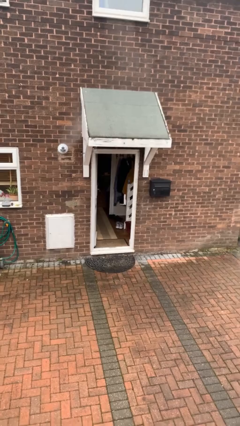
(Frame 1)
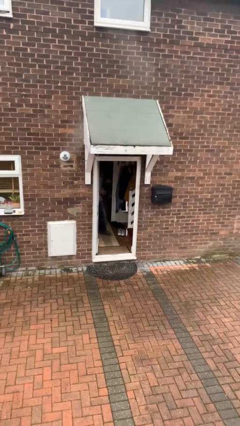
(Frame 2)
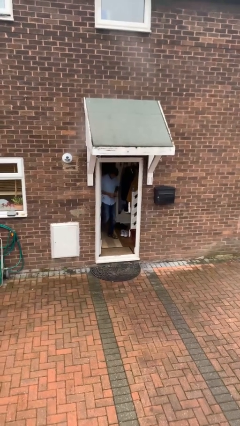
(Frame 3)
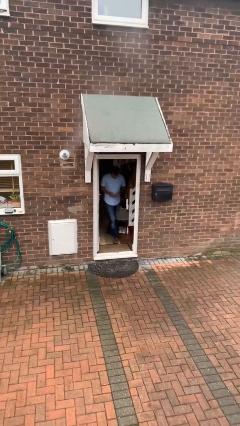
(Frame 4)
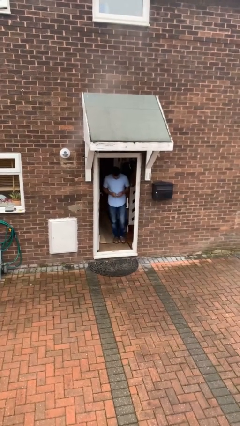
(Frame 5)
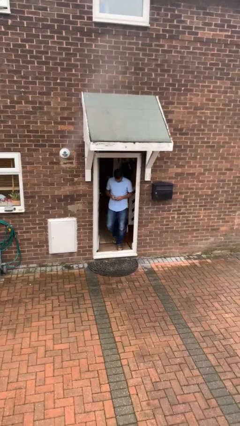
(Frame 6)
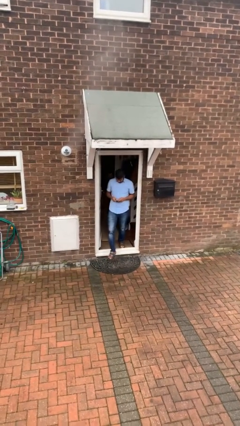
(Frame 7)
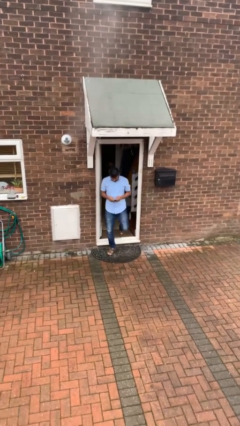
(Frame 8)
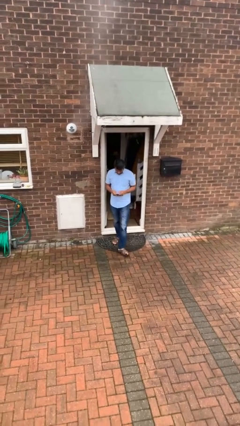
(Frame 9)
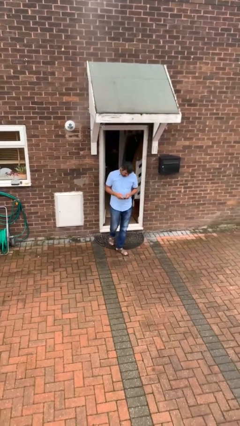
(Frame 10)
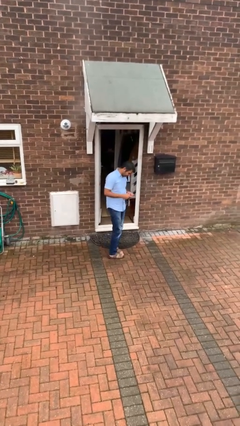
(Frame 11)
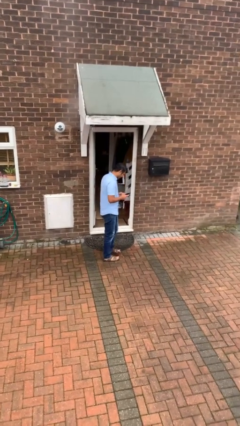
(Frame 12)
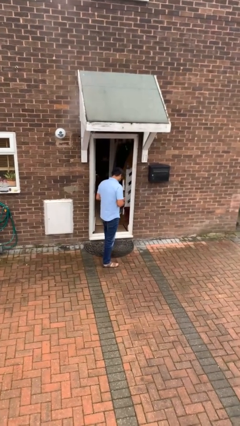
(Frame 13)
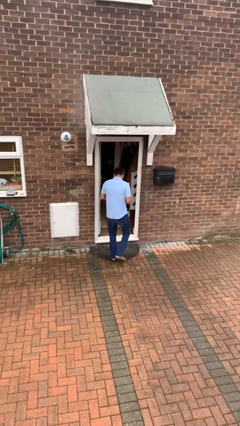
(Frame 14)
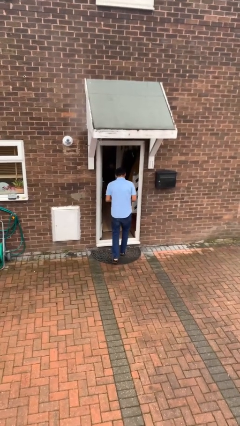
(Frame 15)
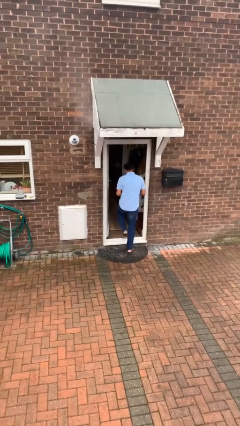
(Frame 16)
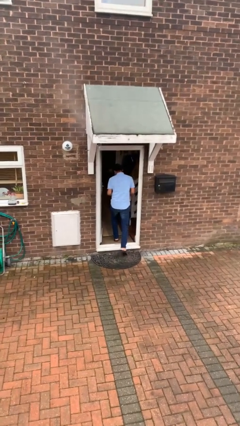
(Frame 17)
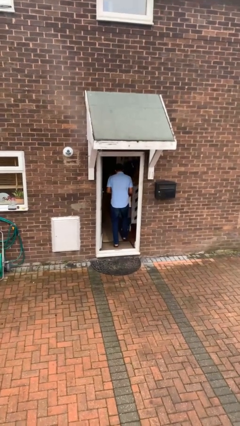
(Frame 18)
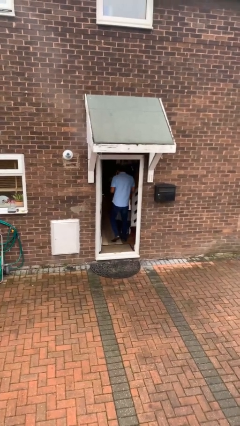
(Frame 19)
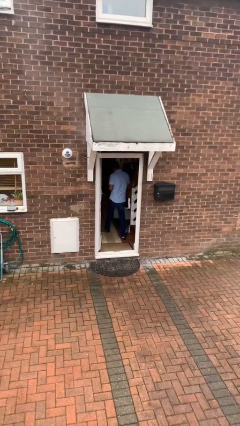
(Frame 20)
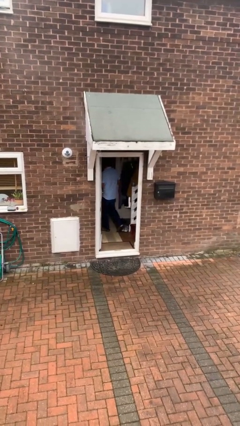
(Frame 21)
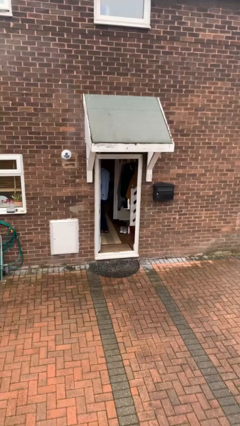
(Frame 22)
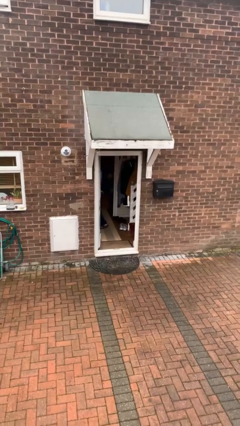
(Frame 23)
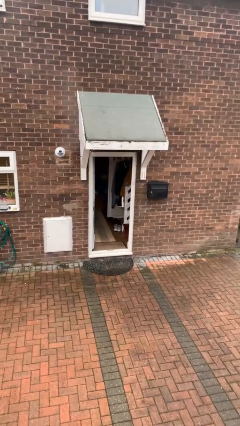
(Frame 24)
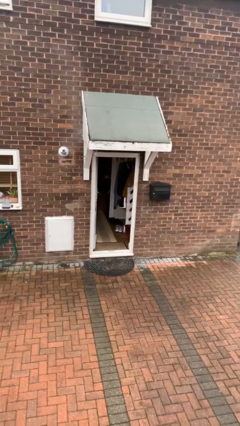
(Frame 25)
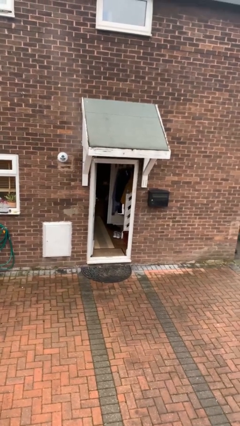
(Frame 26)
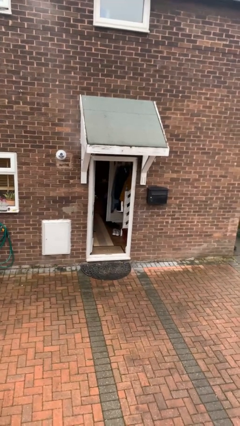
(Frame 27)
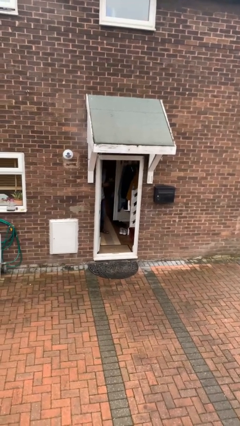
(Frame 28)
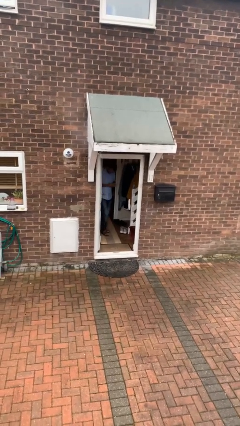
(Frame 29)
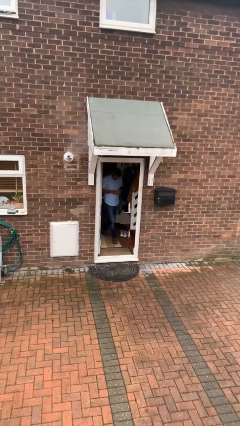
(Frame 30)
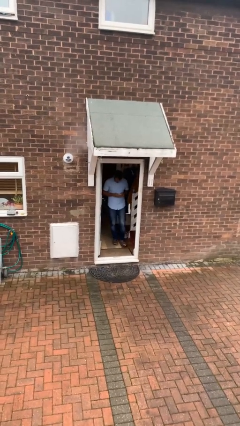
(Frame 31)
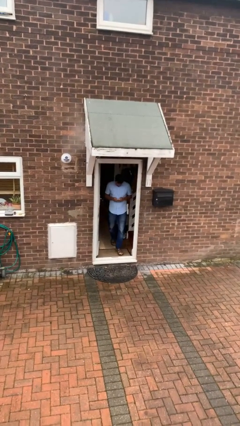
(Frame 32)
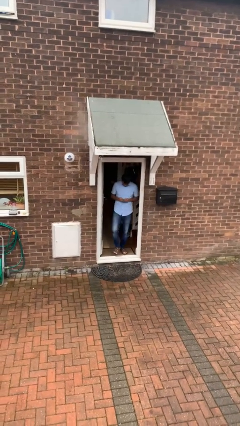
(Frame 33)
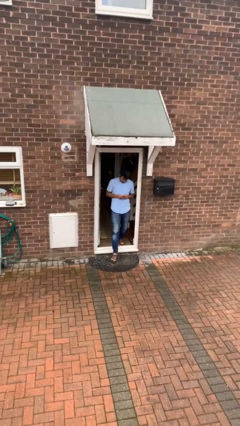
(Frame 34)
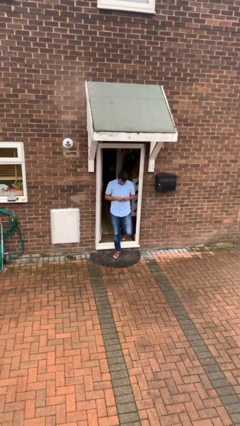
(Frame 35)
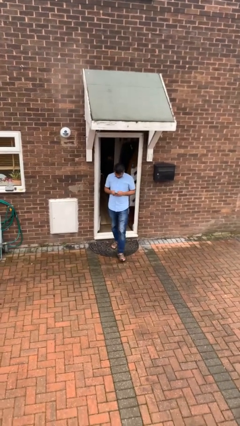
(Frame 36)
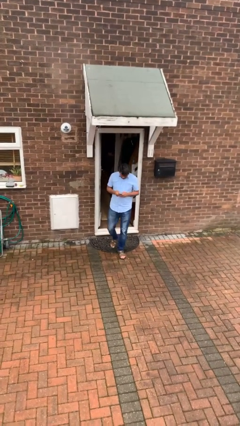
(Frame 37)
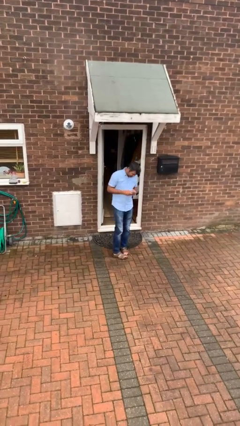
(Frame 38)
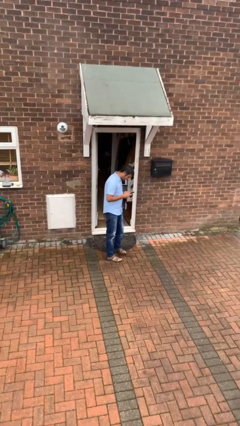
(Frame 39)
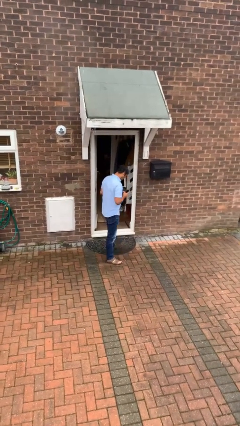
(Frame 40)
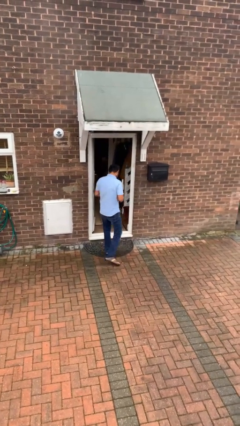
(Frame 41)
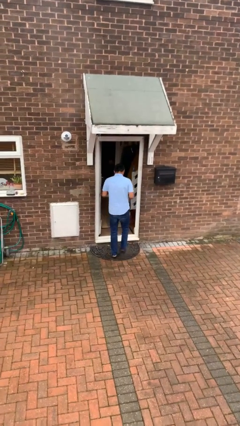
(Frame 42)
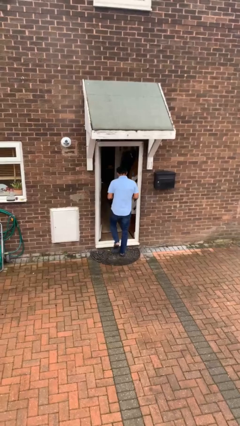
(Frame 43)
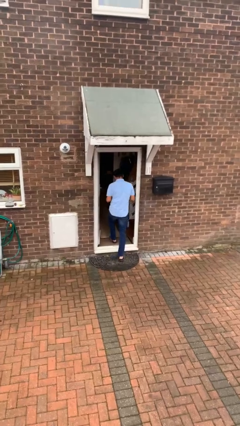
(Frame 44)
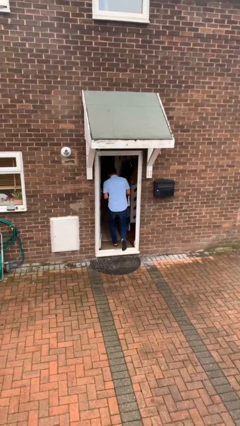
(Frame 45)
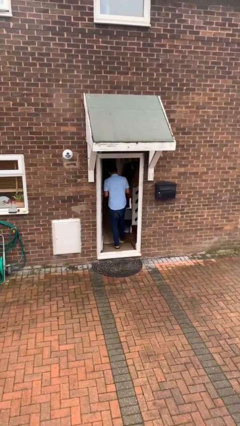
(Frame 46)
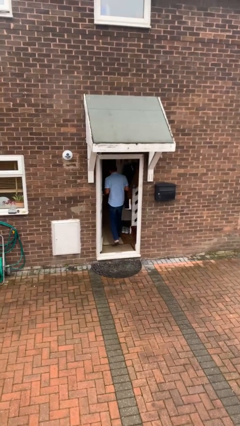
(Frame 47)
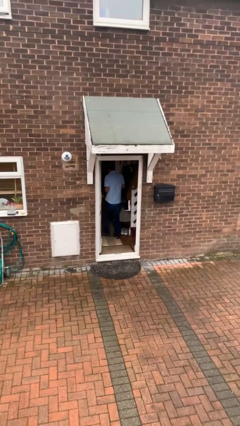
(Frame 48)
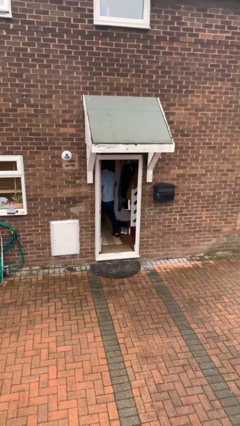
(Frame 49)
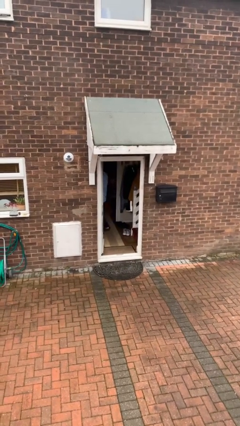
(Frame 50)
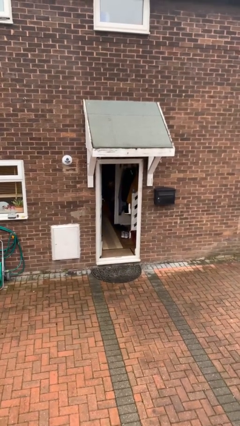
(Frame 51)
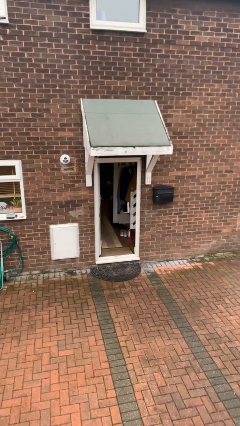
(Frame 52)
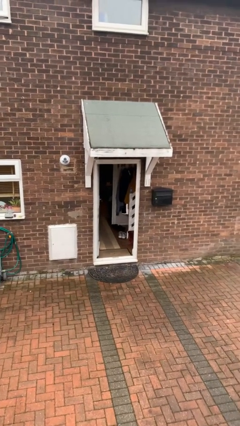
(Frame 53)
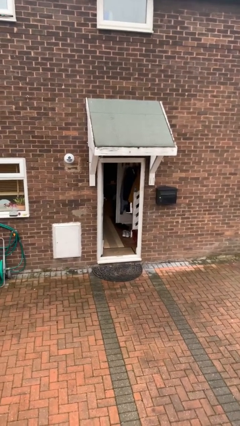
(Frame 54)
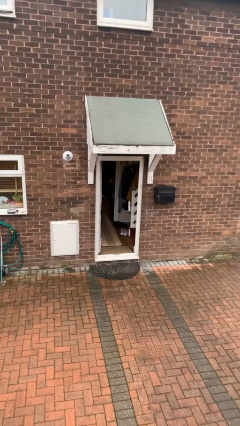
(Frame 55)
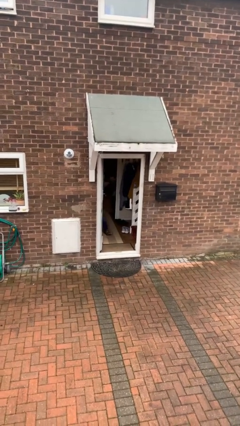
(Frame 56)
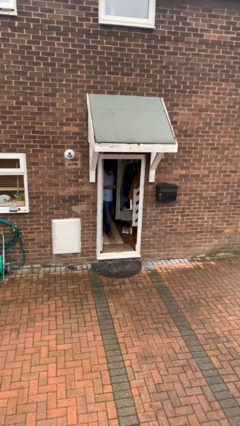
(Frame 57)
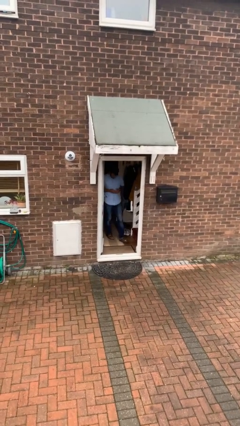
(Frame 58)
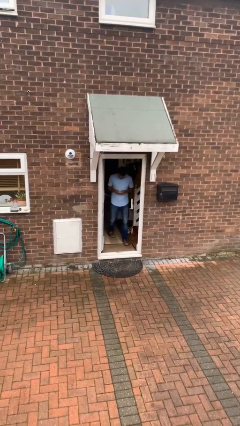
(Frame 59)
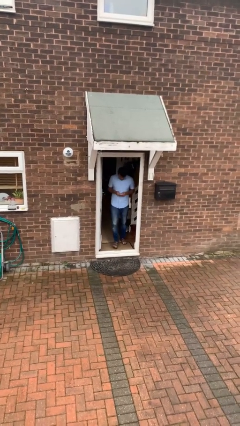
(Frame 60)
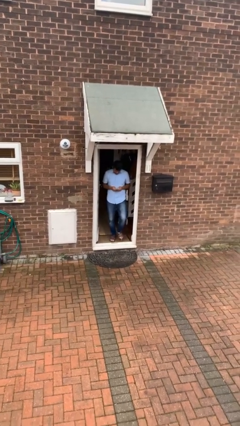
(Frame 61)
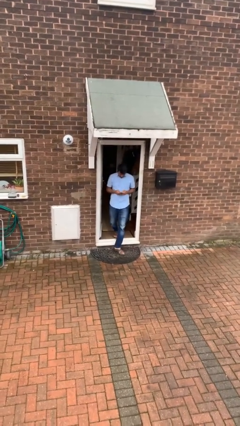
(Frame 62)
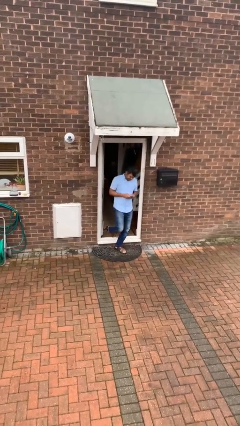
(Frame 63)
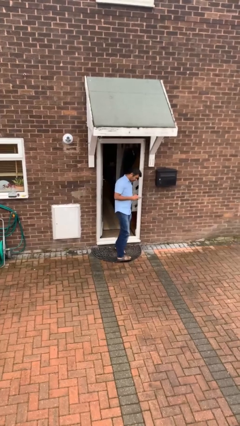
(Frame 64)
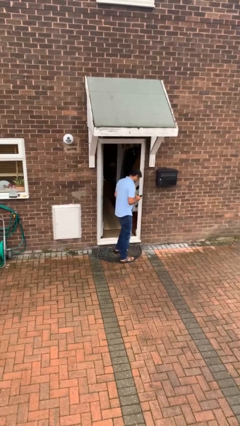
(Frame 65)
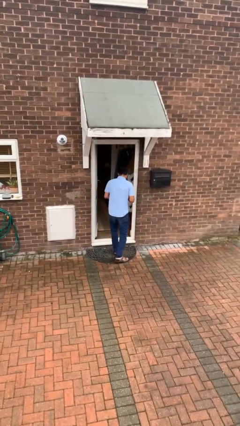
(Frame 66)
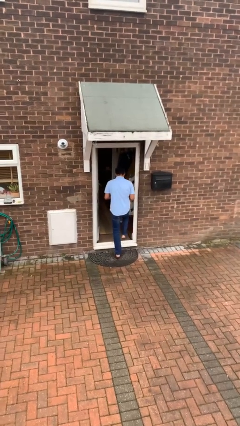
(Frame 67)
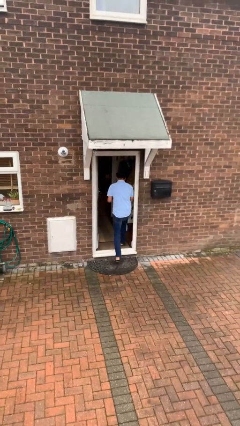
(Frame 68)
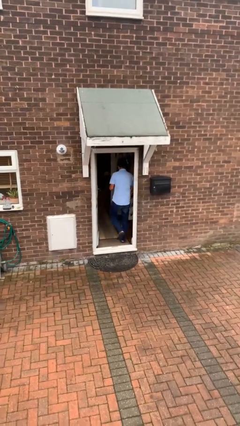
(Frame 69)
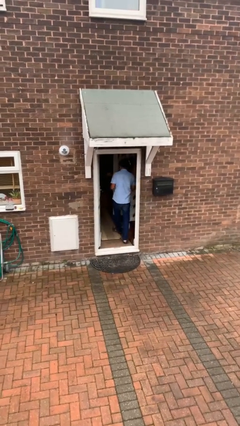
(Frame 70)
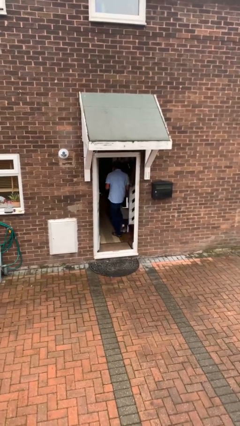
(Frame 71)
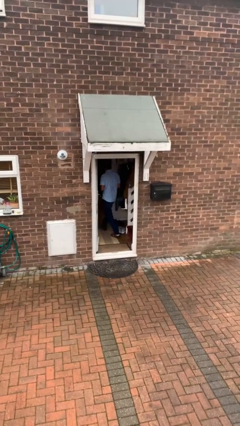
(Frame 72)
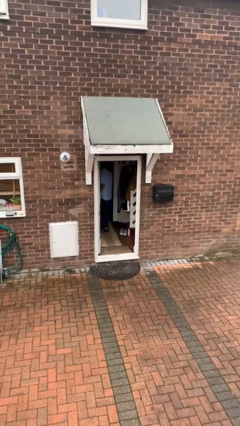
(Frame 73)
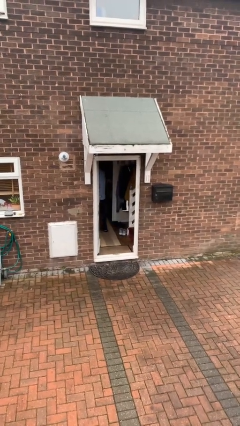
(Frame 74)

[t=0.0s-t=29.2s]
person texts on phone

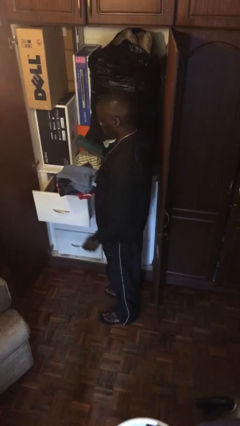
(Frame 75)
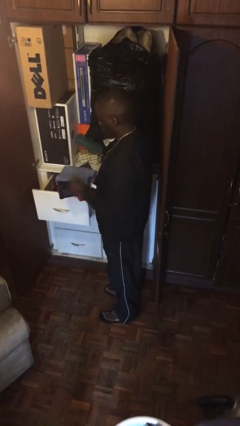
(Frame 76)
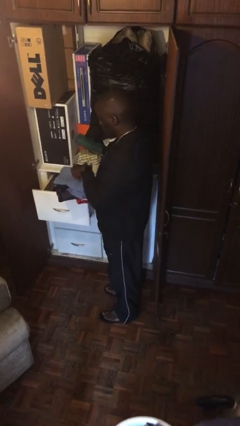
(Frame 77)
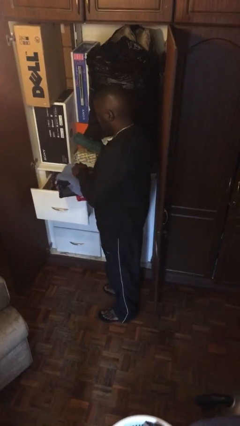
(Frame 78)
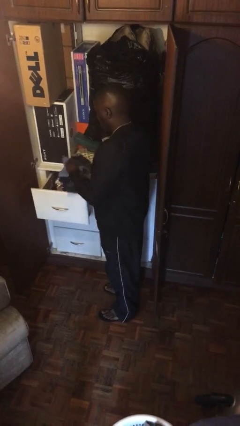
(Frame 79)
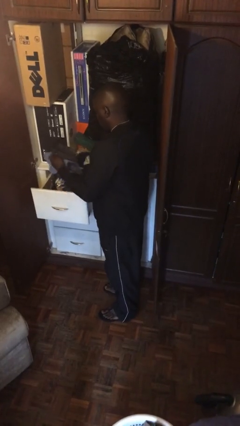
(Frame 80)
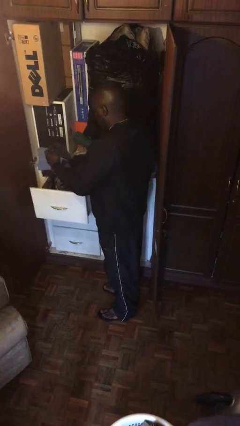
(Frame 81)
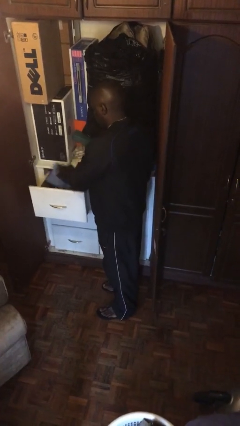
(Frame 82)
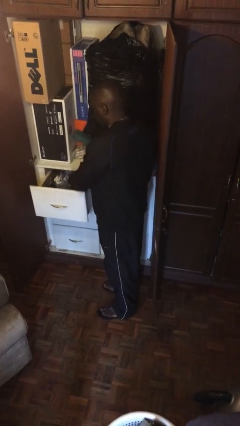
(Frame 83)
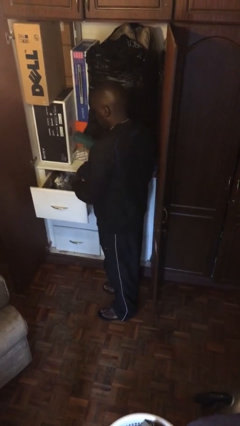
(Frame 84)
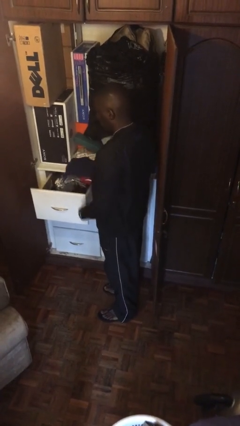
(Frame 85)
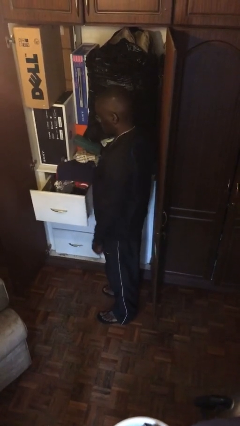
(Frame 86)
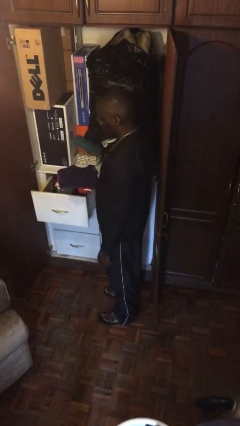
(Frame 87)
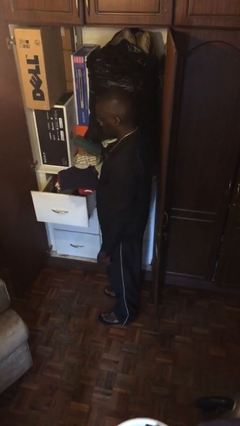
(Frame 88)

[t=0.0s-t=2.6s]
person puts clothes into dresser

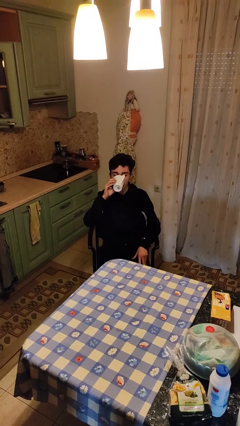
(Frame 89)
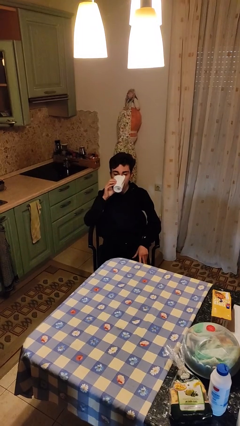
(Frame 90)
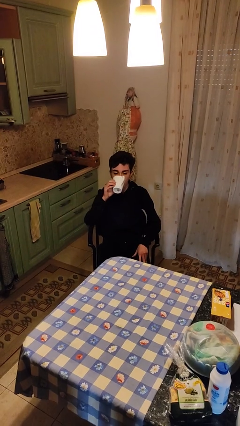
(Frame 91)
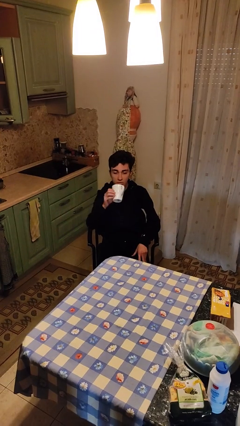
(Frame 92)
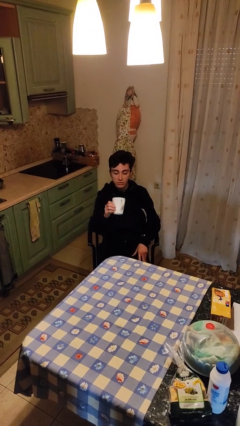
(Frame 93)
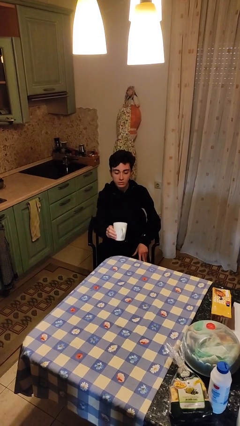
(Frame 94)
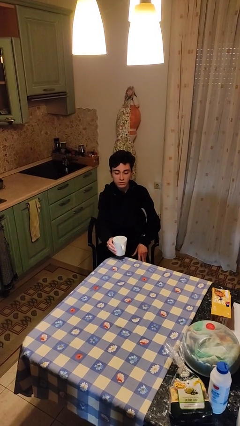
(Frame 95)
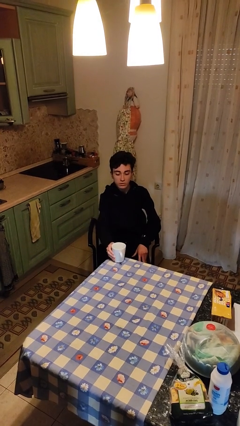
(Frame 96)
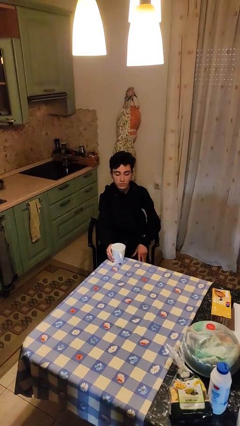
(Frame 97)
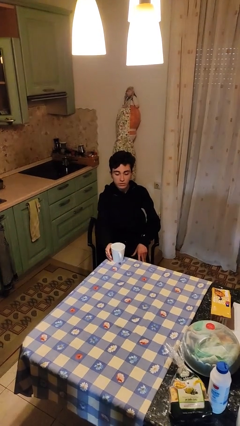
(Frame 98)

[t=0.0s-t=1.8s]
person puts down object on table
